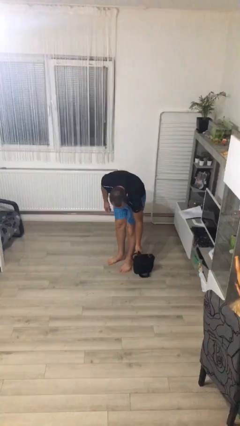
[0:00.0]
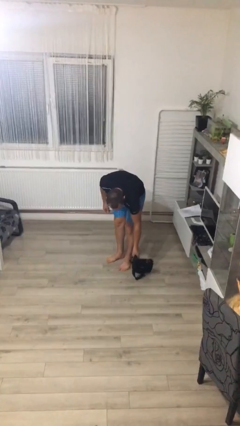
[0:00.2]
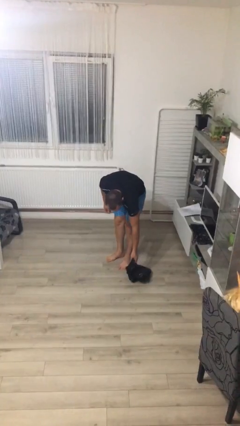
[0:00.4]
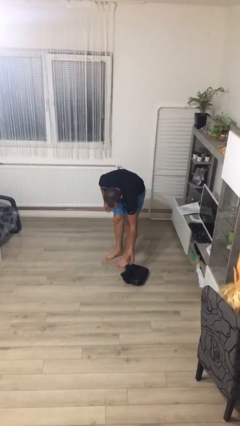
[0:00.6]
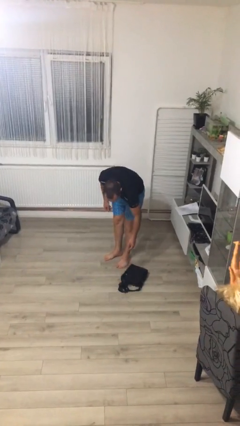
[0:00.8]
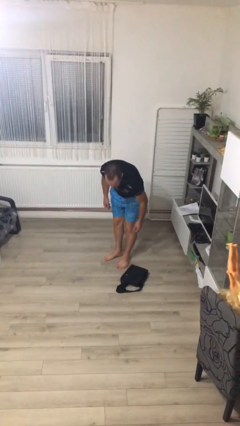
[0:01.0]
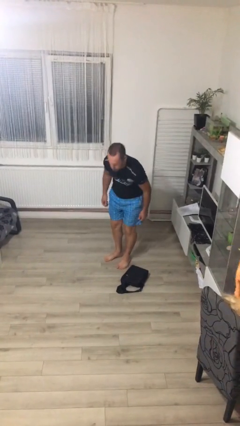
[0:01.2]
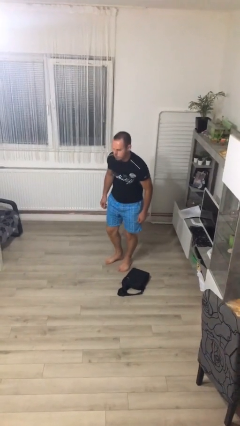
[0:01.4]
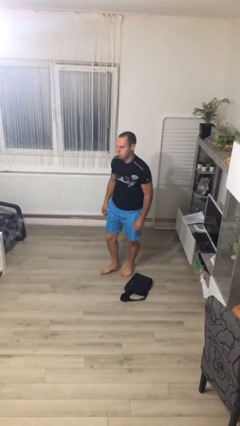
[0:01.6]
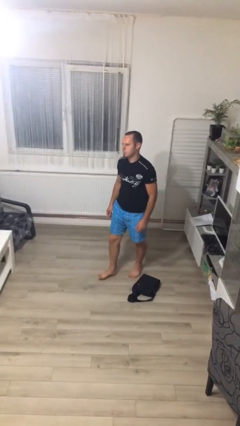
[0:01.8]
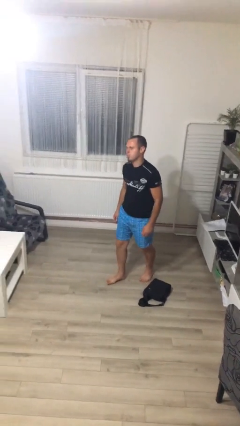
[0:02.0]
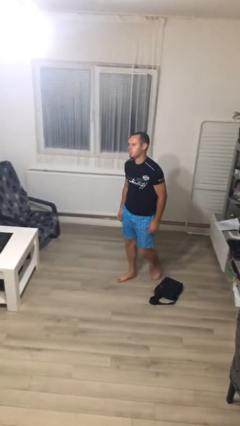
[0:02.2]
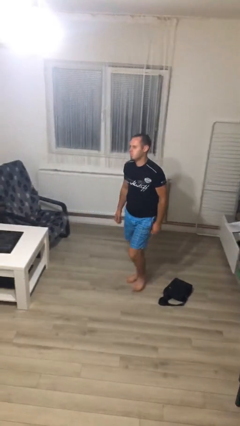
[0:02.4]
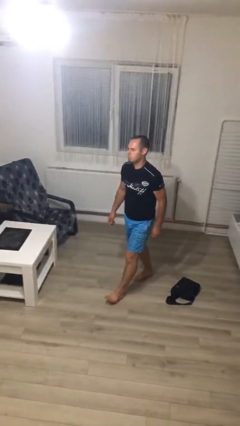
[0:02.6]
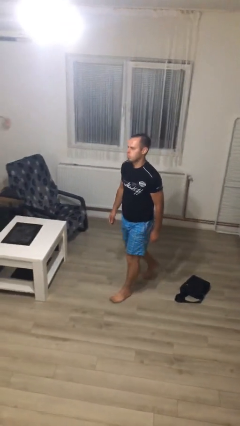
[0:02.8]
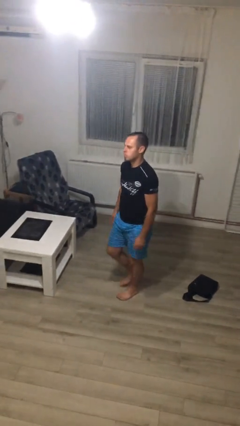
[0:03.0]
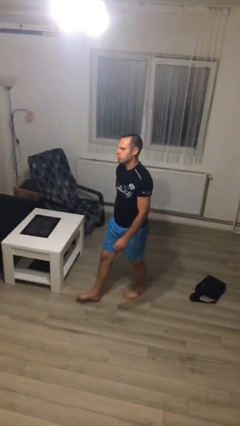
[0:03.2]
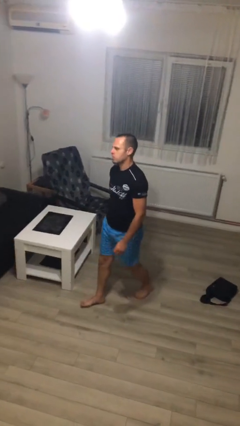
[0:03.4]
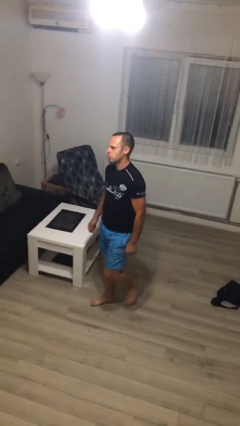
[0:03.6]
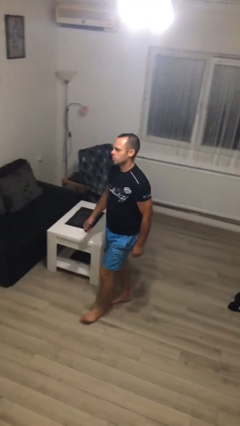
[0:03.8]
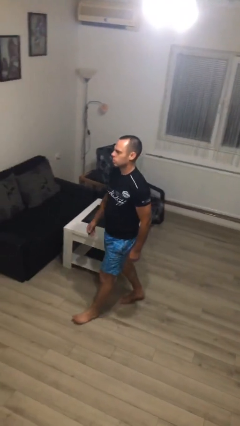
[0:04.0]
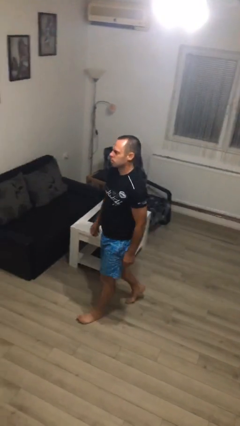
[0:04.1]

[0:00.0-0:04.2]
person puts down object on floor

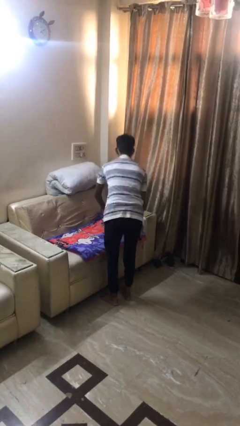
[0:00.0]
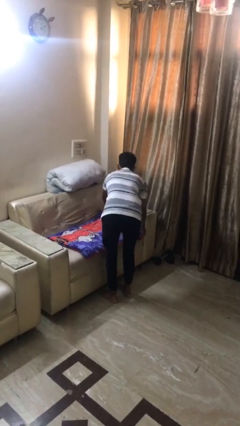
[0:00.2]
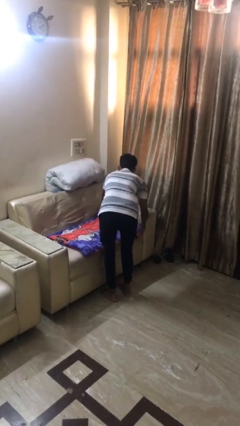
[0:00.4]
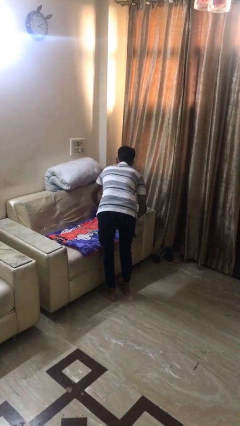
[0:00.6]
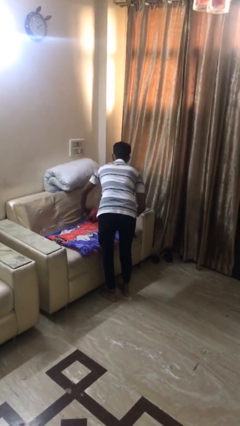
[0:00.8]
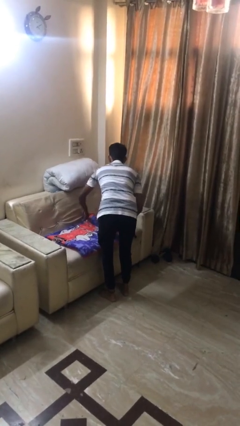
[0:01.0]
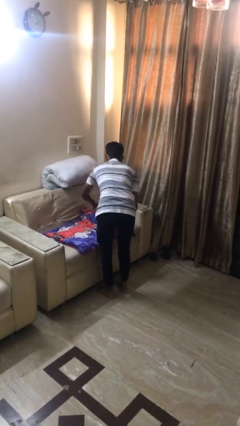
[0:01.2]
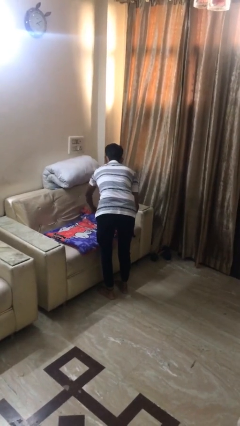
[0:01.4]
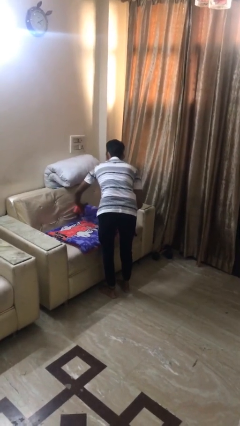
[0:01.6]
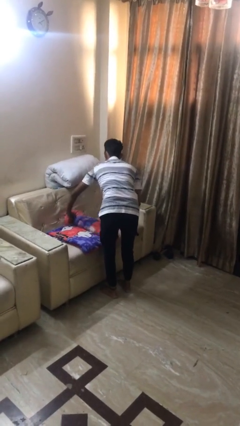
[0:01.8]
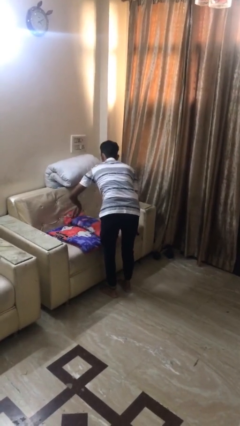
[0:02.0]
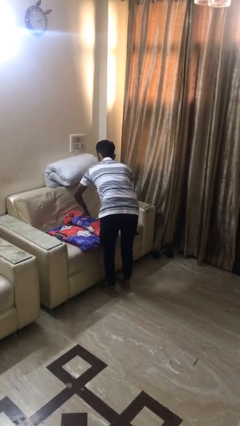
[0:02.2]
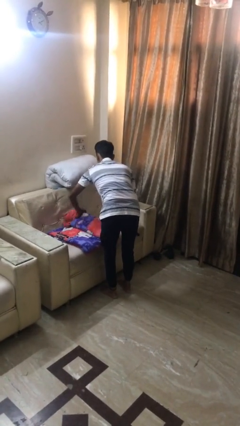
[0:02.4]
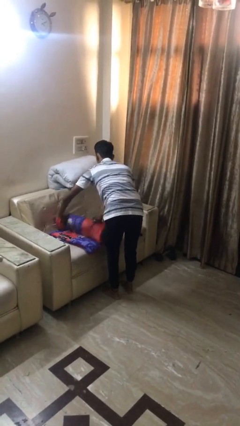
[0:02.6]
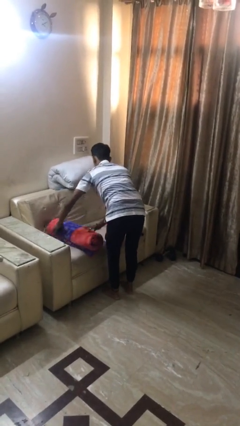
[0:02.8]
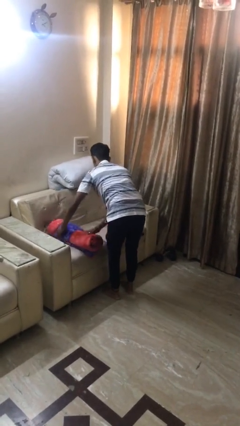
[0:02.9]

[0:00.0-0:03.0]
person folds blanket

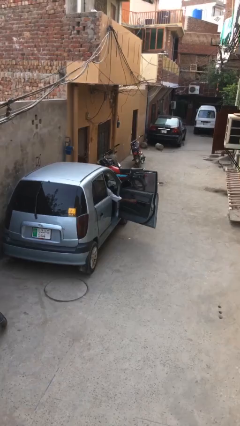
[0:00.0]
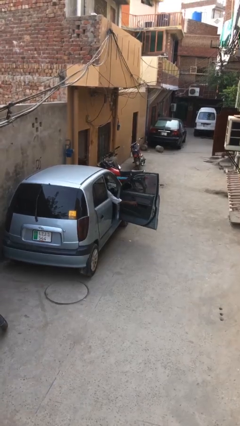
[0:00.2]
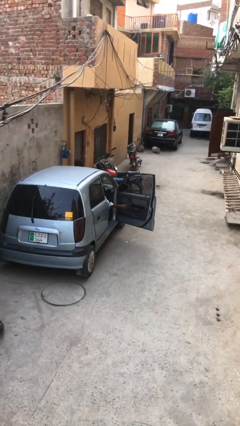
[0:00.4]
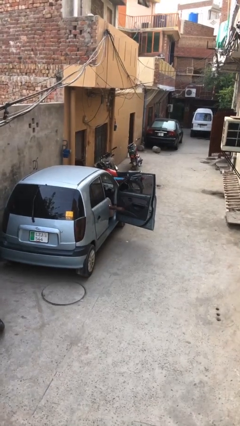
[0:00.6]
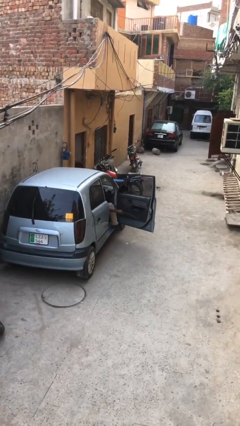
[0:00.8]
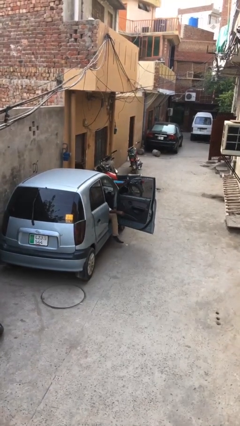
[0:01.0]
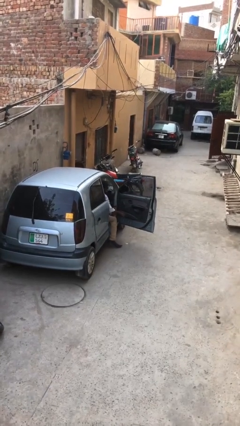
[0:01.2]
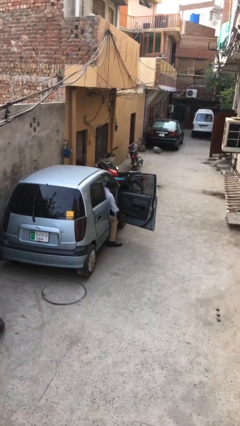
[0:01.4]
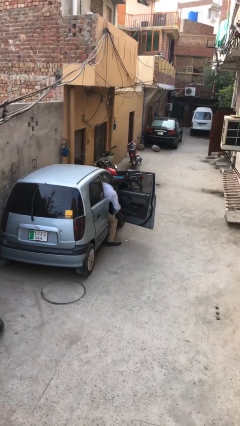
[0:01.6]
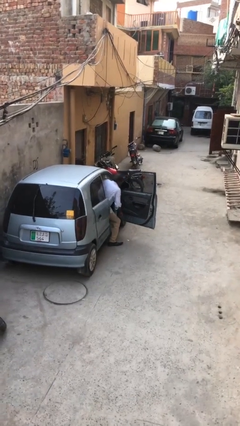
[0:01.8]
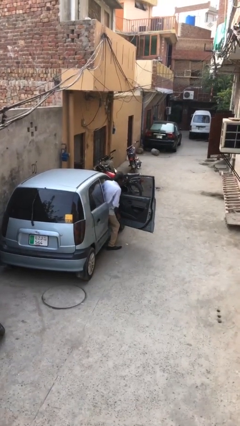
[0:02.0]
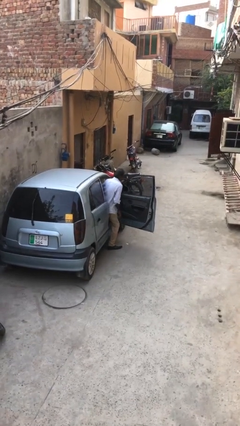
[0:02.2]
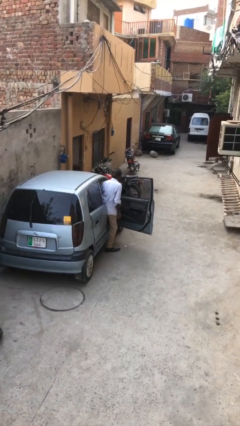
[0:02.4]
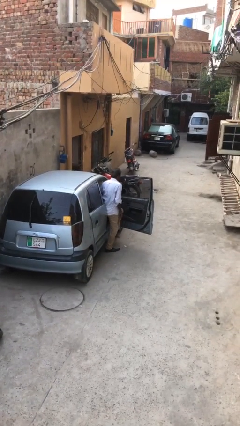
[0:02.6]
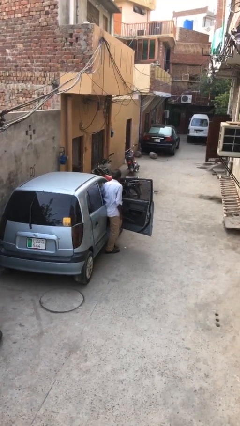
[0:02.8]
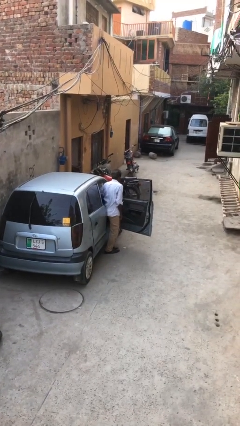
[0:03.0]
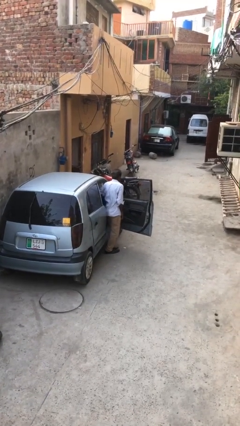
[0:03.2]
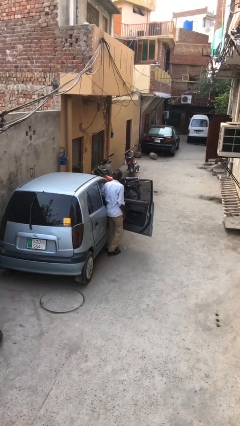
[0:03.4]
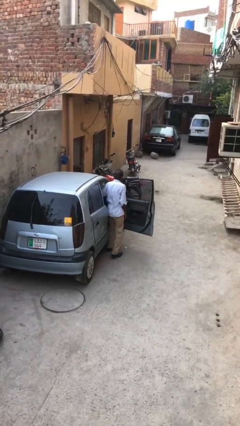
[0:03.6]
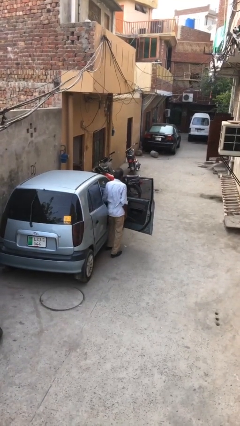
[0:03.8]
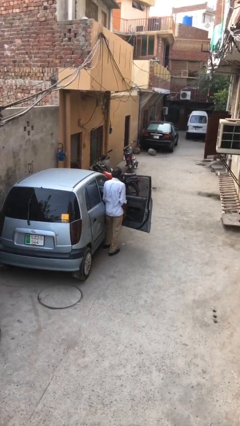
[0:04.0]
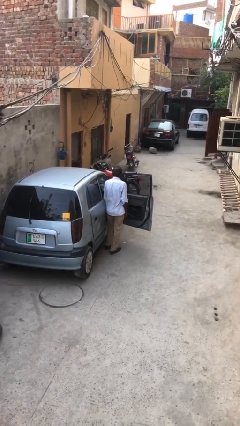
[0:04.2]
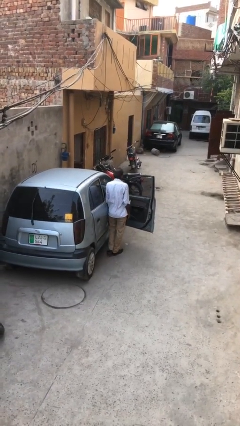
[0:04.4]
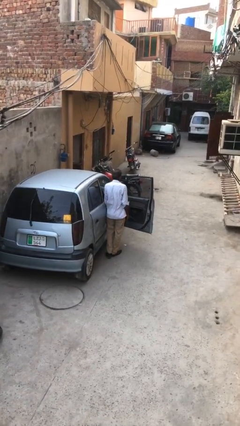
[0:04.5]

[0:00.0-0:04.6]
person exits car

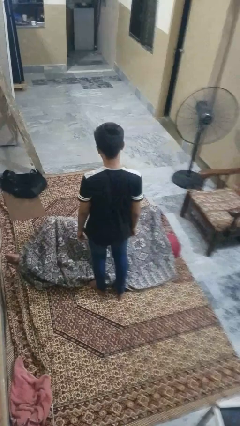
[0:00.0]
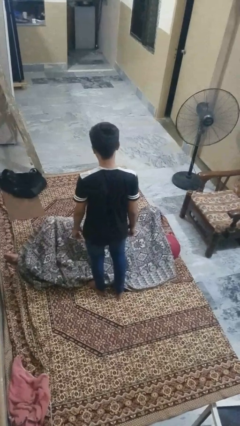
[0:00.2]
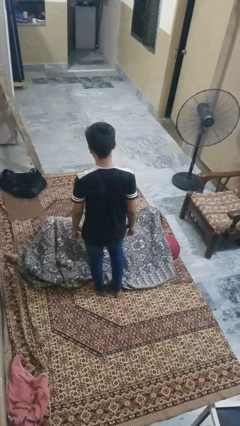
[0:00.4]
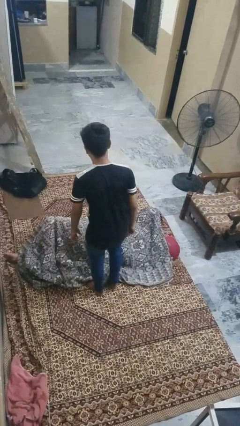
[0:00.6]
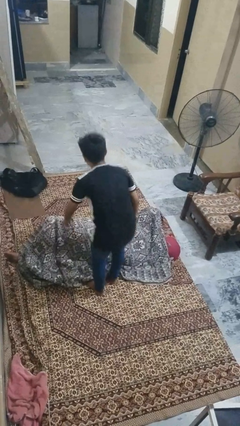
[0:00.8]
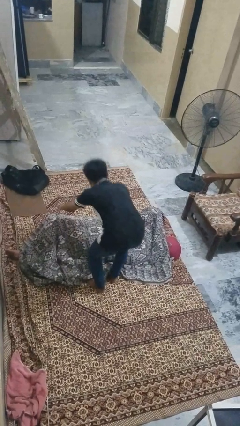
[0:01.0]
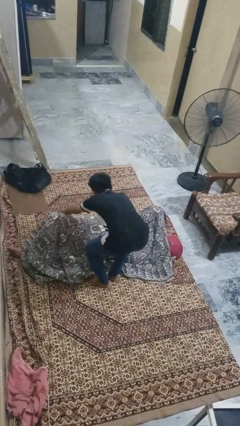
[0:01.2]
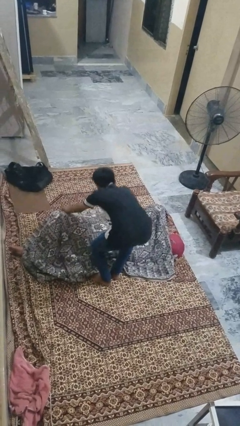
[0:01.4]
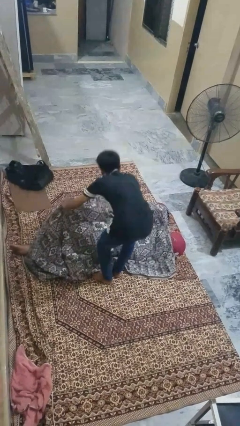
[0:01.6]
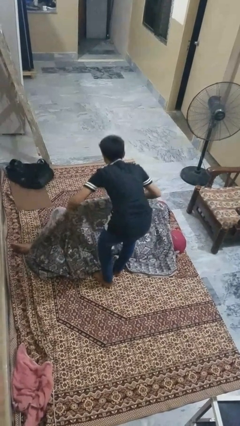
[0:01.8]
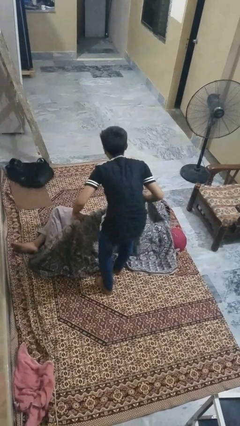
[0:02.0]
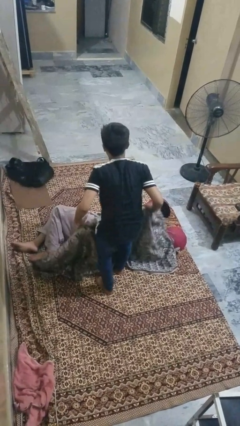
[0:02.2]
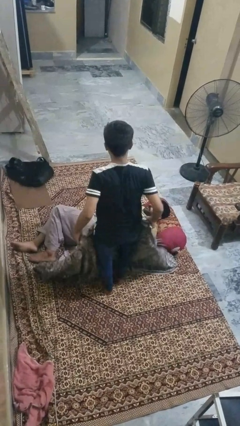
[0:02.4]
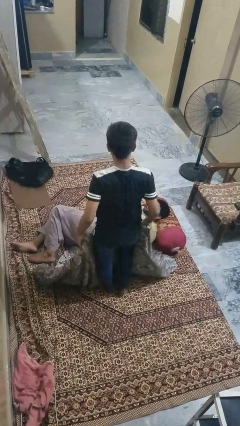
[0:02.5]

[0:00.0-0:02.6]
person uncovers friend with blanket

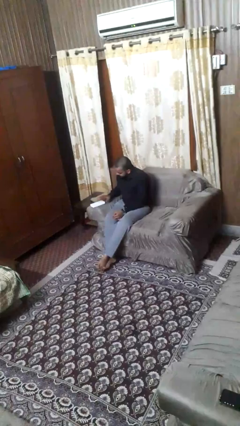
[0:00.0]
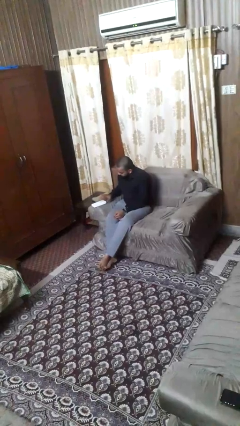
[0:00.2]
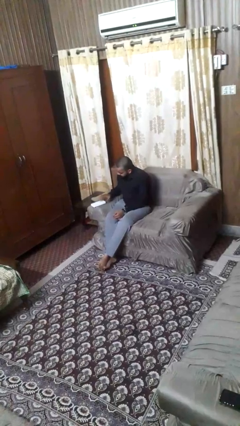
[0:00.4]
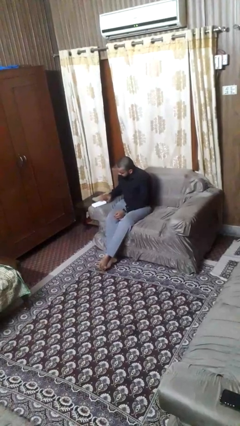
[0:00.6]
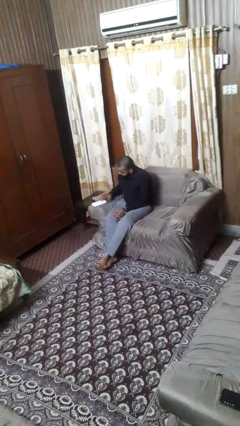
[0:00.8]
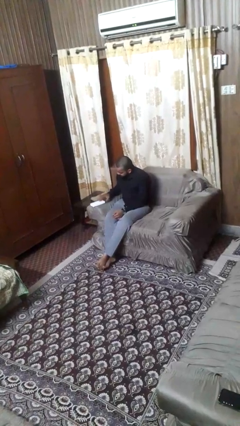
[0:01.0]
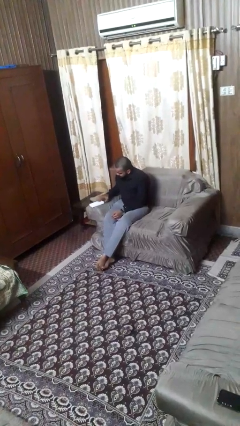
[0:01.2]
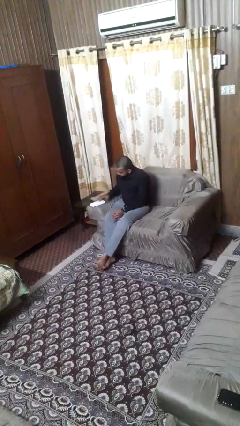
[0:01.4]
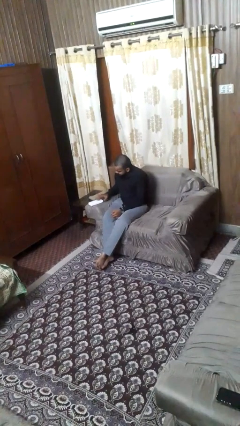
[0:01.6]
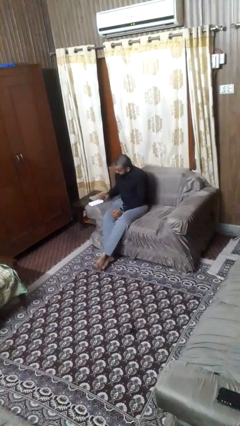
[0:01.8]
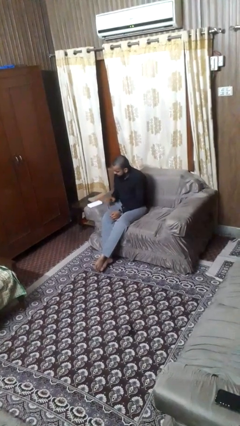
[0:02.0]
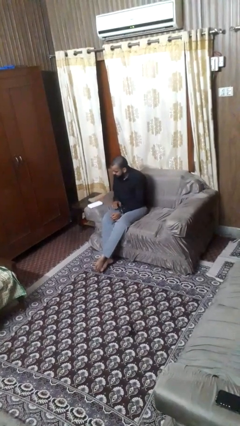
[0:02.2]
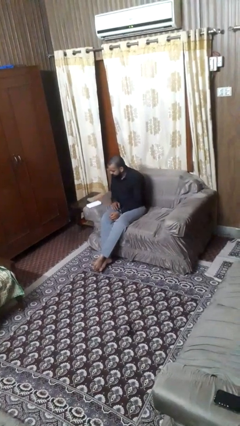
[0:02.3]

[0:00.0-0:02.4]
person taps object with finger

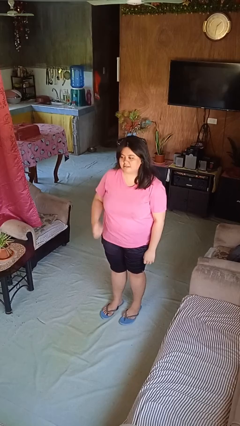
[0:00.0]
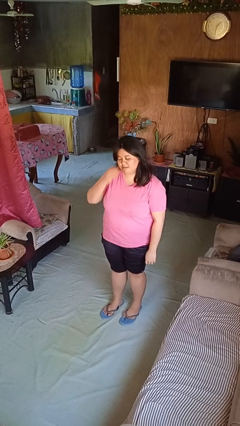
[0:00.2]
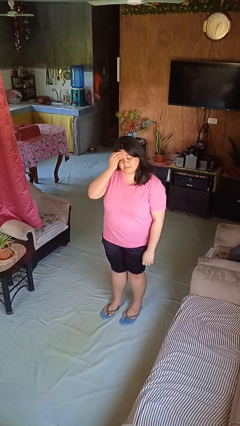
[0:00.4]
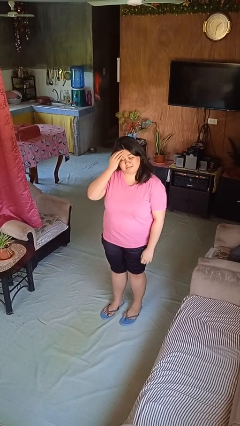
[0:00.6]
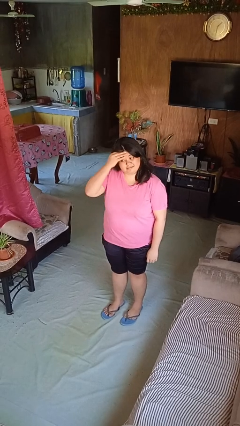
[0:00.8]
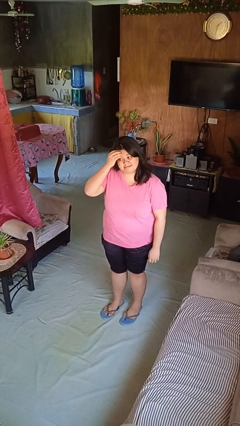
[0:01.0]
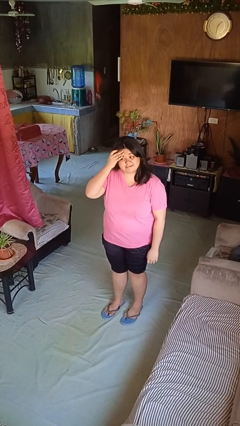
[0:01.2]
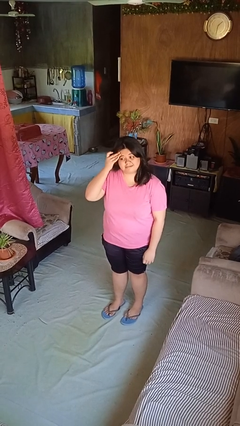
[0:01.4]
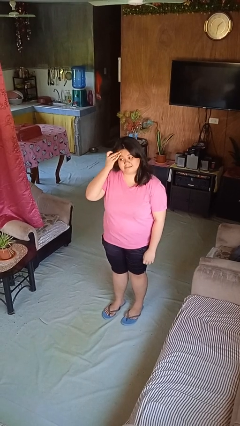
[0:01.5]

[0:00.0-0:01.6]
person scratches face
